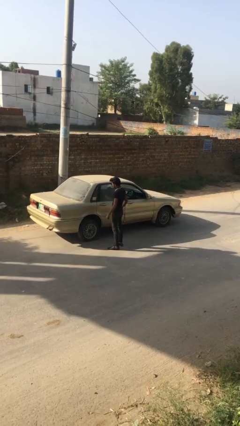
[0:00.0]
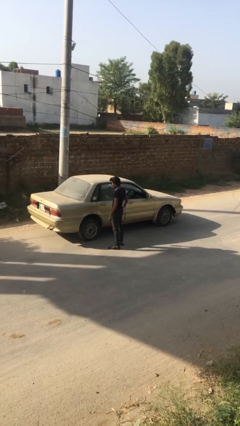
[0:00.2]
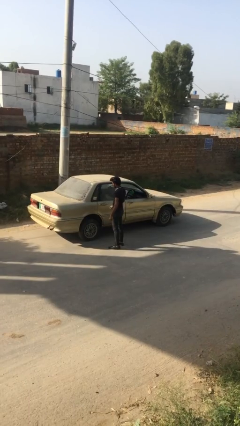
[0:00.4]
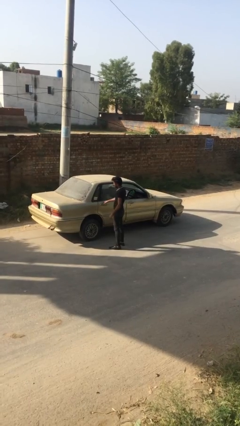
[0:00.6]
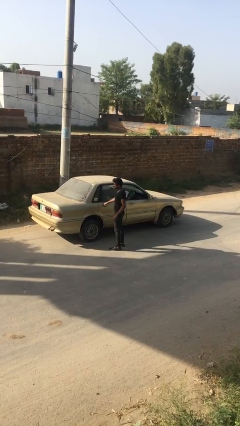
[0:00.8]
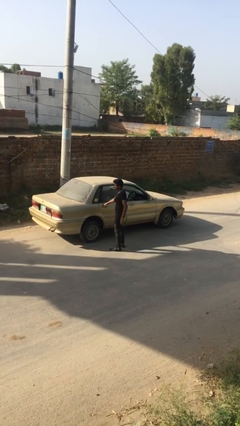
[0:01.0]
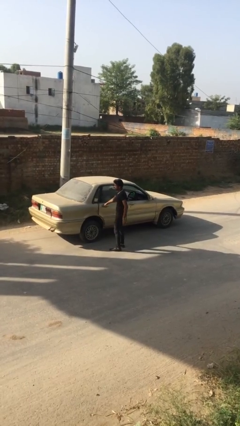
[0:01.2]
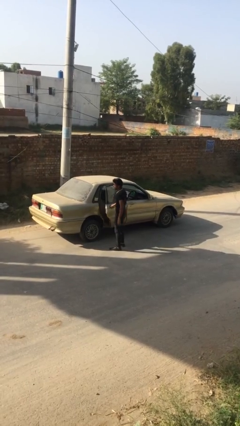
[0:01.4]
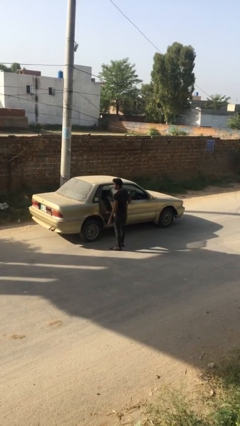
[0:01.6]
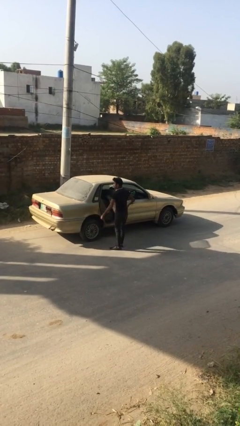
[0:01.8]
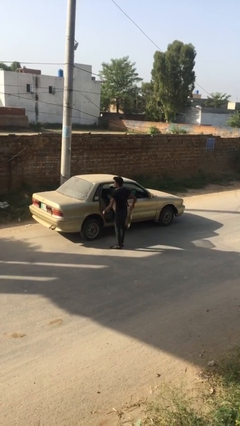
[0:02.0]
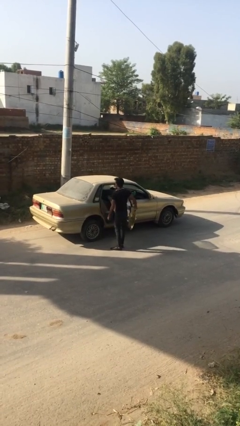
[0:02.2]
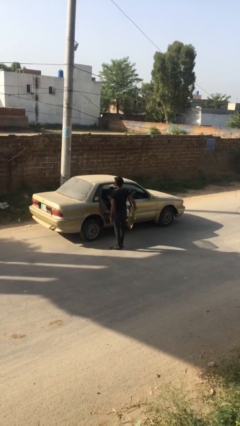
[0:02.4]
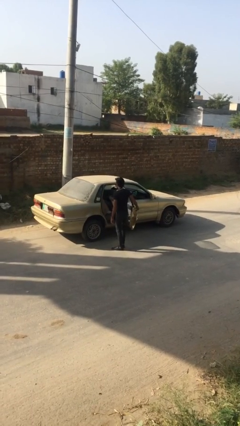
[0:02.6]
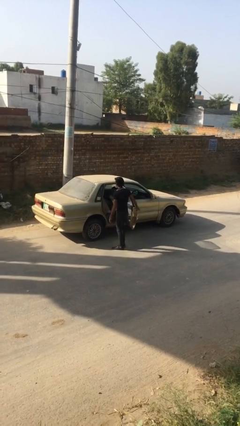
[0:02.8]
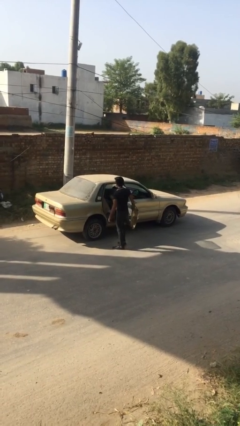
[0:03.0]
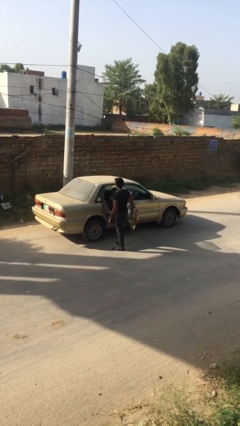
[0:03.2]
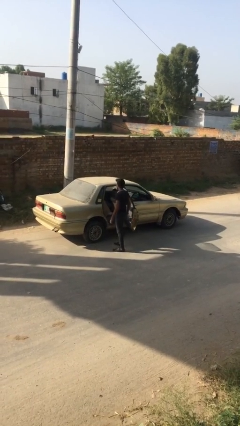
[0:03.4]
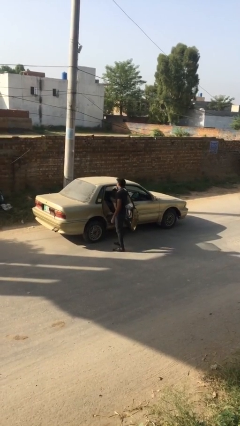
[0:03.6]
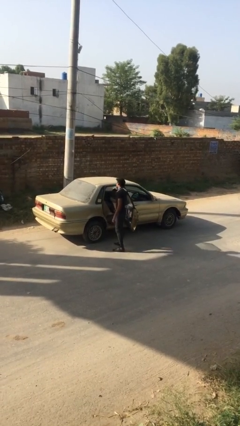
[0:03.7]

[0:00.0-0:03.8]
person opens car door

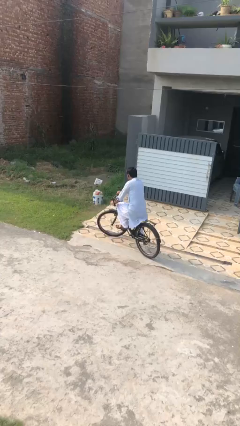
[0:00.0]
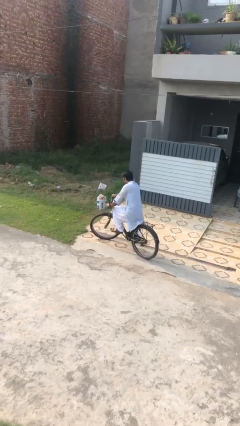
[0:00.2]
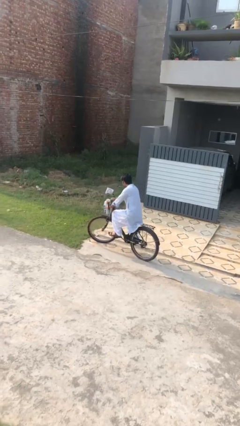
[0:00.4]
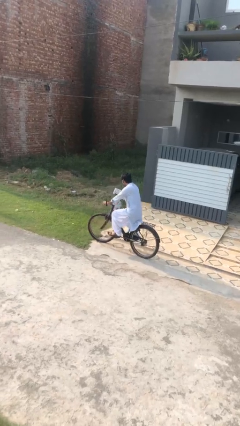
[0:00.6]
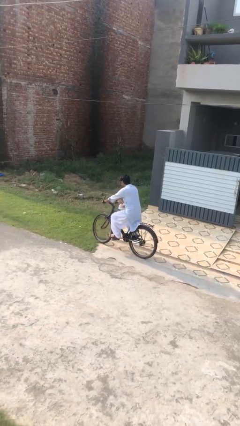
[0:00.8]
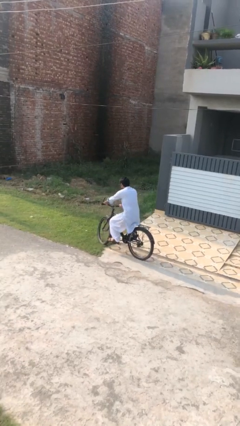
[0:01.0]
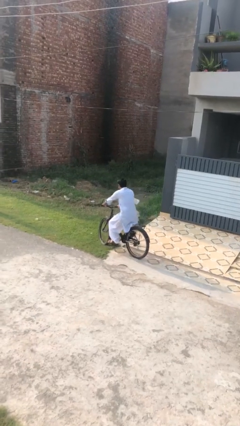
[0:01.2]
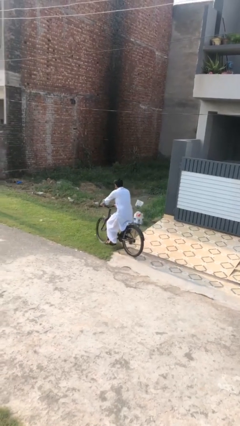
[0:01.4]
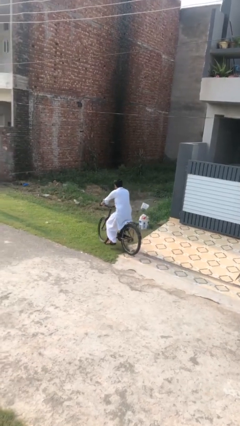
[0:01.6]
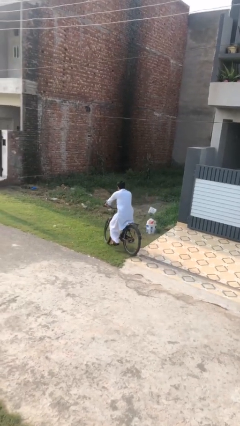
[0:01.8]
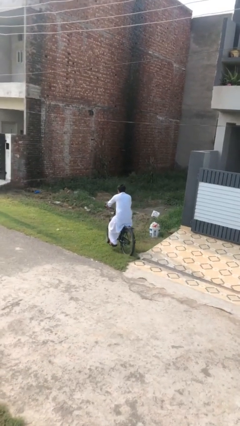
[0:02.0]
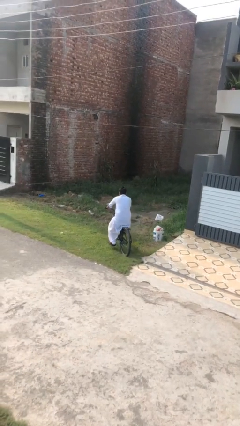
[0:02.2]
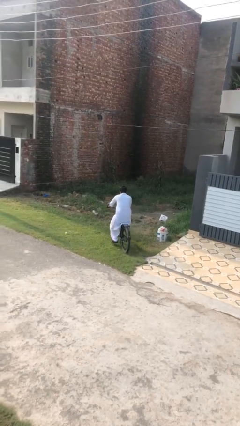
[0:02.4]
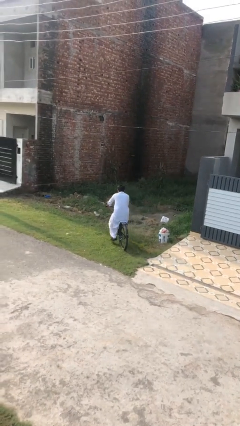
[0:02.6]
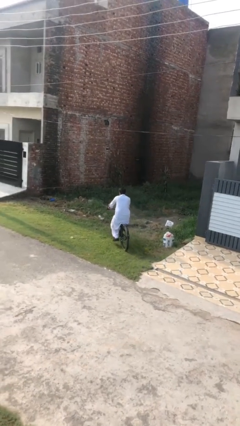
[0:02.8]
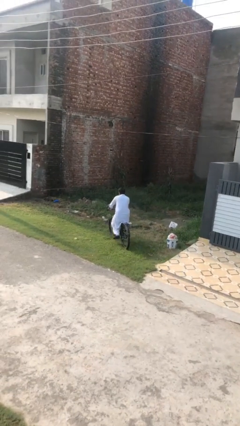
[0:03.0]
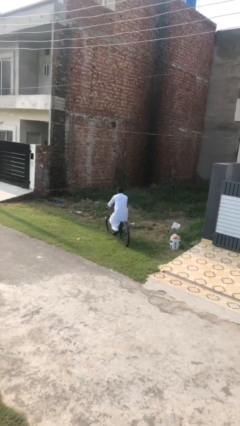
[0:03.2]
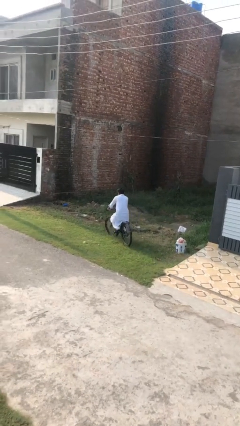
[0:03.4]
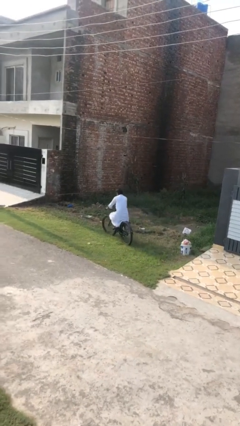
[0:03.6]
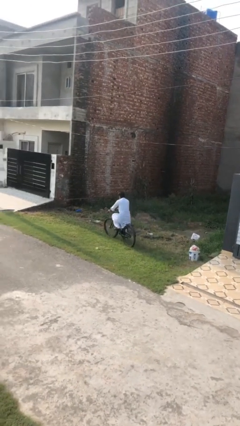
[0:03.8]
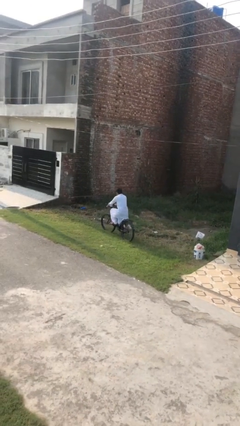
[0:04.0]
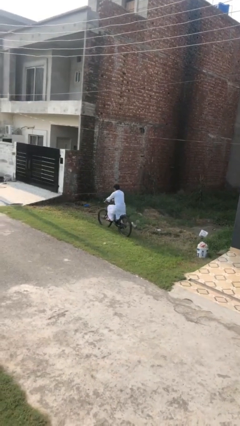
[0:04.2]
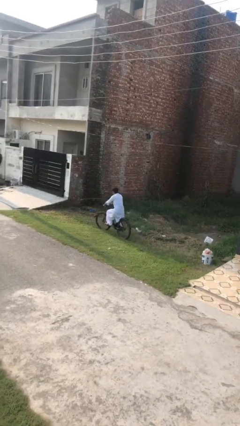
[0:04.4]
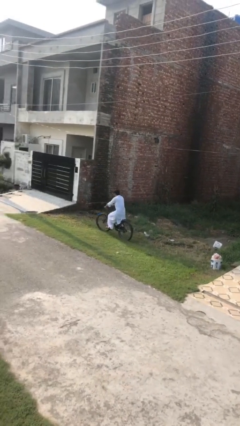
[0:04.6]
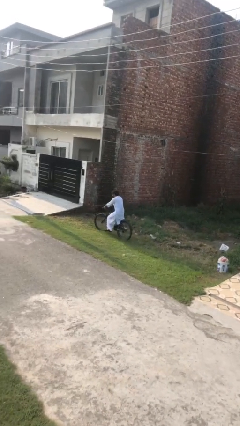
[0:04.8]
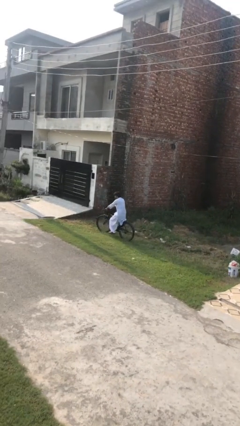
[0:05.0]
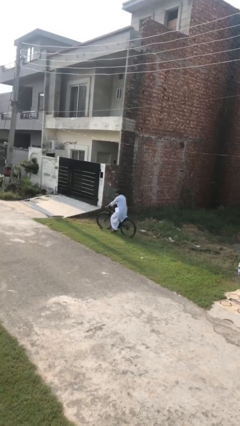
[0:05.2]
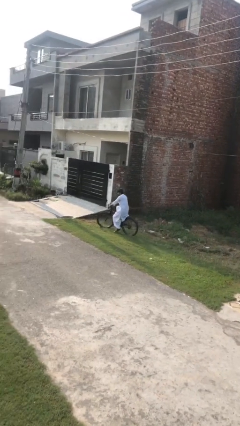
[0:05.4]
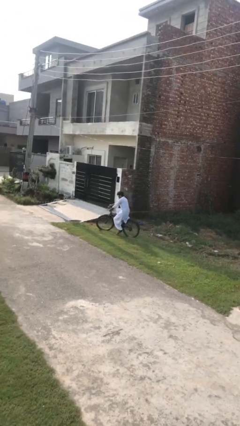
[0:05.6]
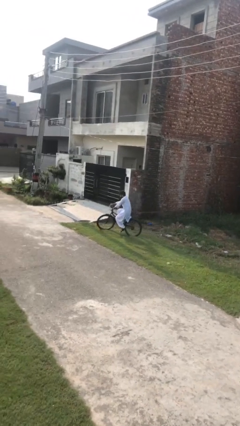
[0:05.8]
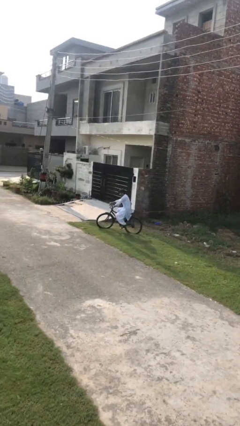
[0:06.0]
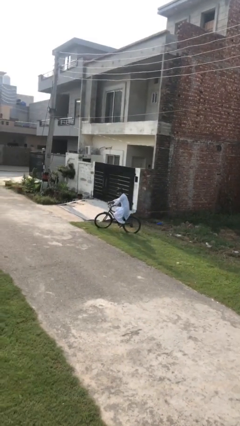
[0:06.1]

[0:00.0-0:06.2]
person rides bicycle

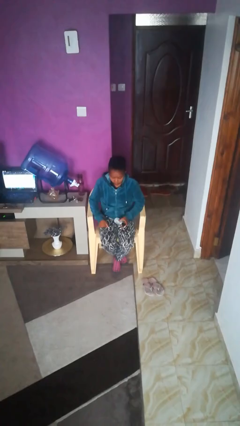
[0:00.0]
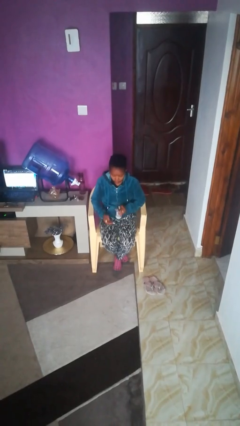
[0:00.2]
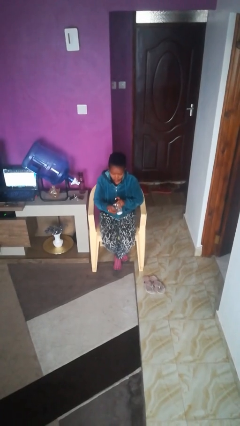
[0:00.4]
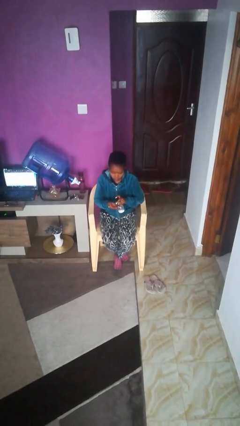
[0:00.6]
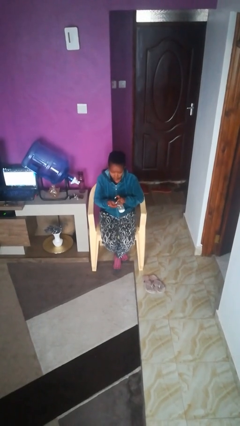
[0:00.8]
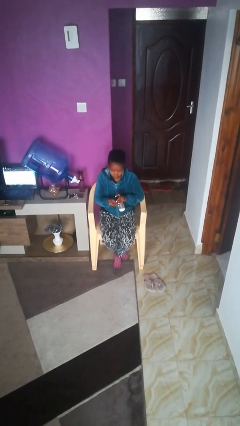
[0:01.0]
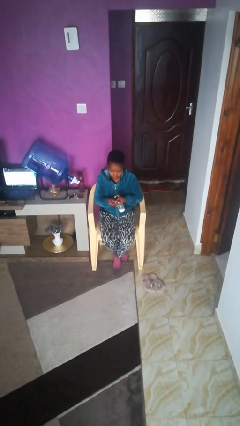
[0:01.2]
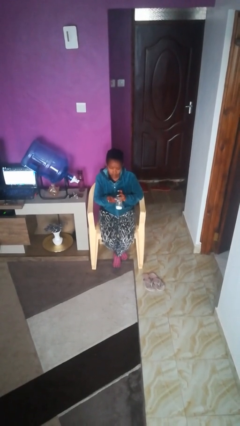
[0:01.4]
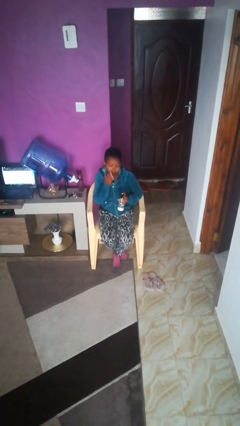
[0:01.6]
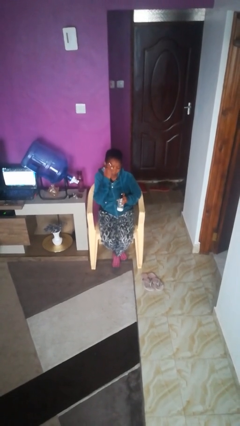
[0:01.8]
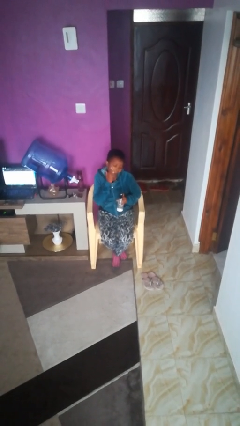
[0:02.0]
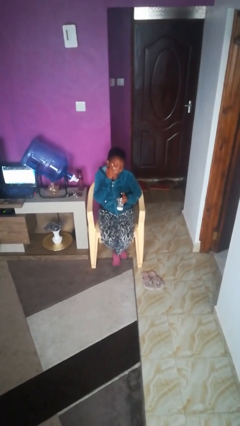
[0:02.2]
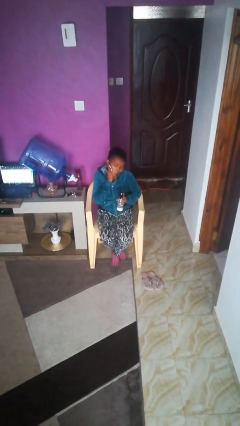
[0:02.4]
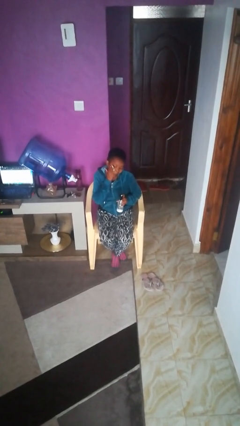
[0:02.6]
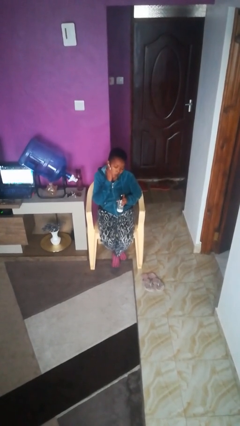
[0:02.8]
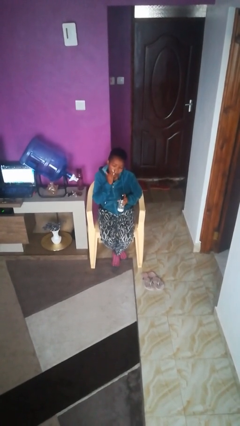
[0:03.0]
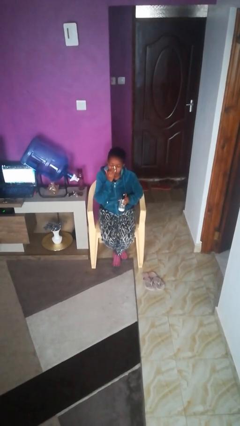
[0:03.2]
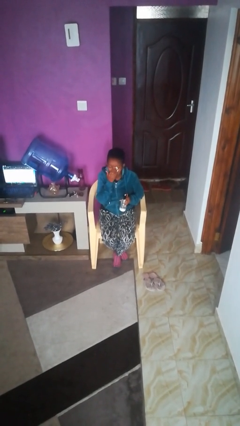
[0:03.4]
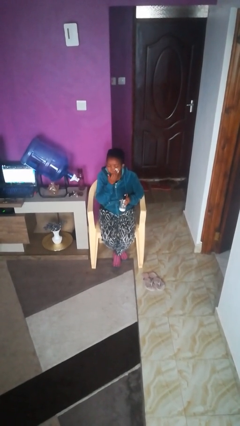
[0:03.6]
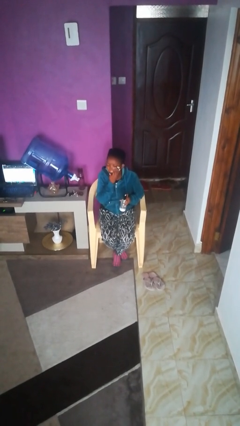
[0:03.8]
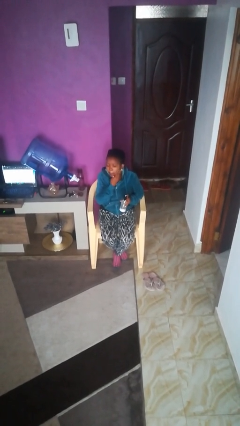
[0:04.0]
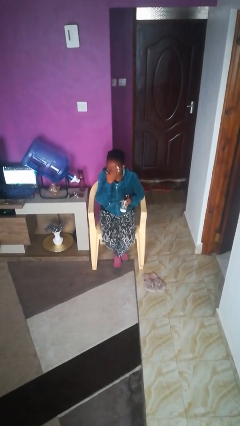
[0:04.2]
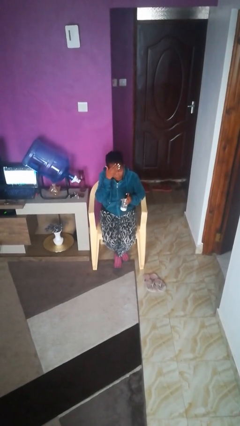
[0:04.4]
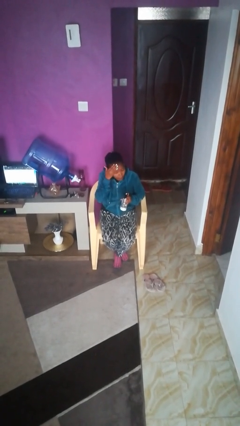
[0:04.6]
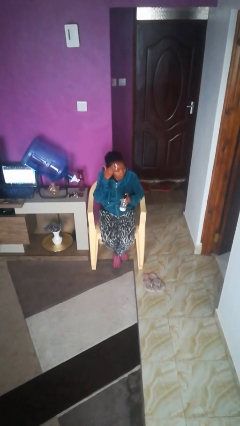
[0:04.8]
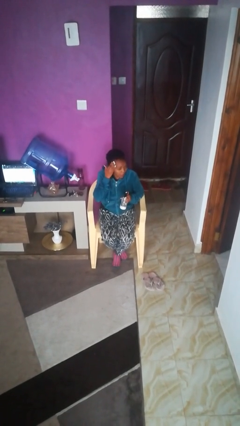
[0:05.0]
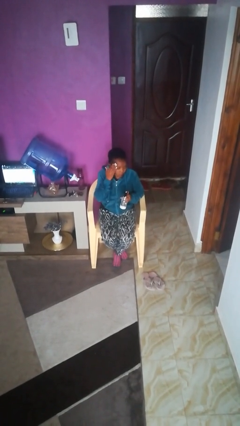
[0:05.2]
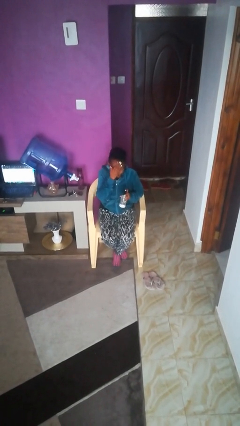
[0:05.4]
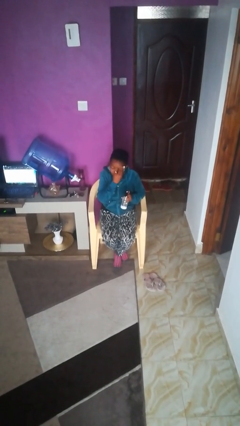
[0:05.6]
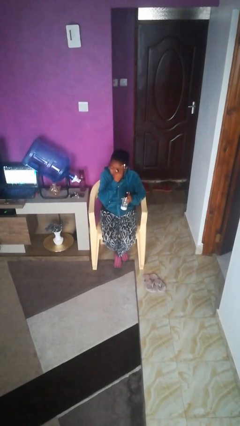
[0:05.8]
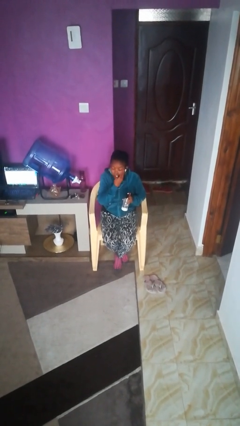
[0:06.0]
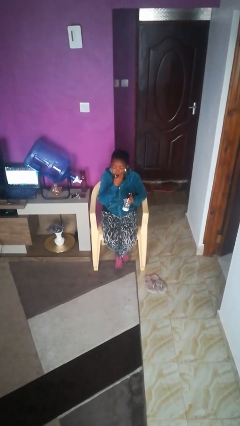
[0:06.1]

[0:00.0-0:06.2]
person applies facial moisturizer

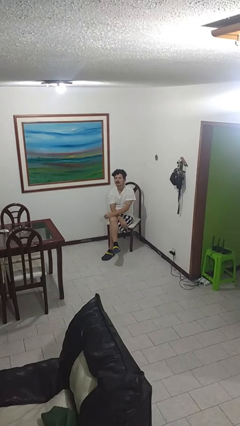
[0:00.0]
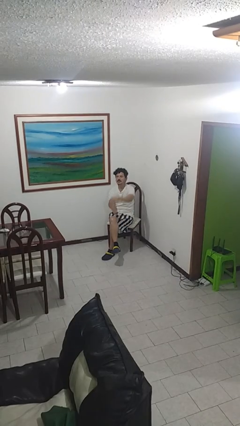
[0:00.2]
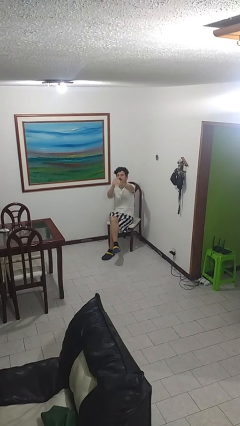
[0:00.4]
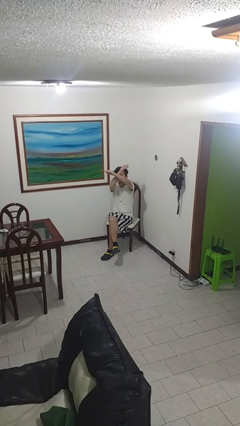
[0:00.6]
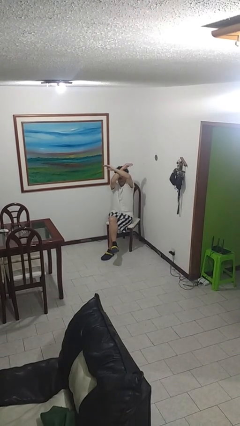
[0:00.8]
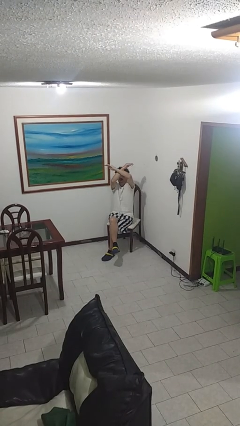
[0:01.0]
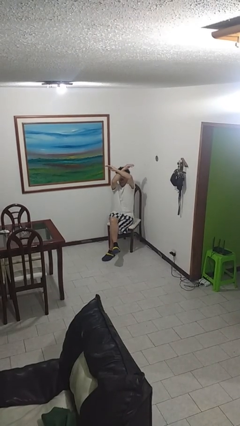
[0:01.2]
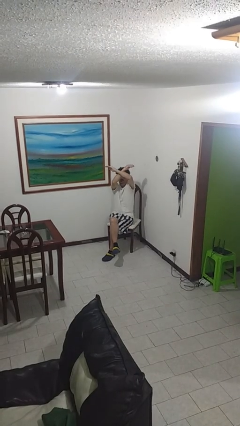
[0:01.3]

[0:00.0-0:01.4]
person gestures arms x
